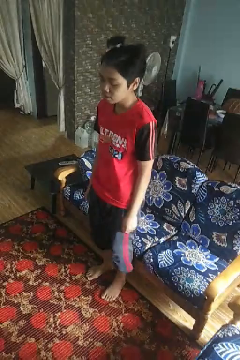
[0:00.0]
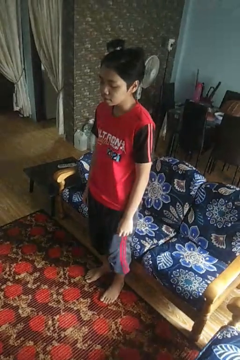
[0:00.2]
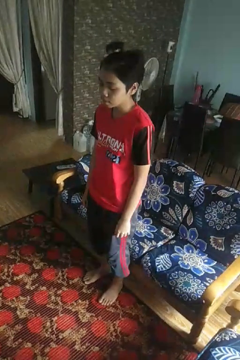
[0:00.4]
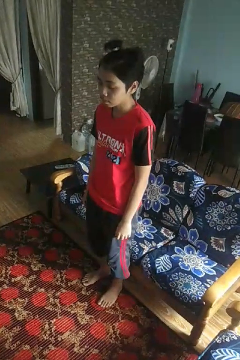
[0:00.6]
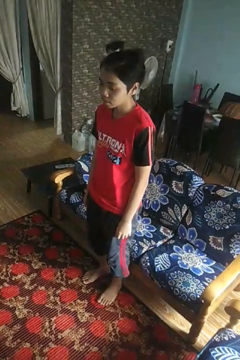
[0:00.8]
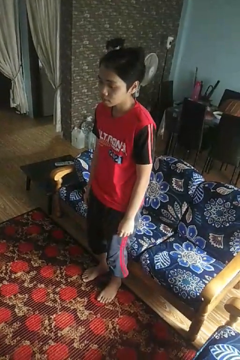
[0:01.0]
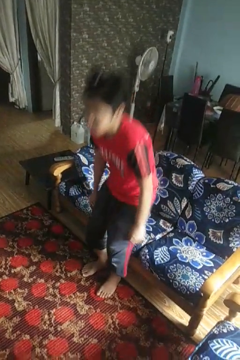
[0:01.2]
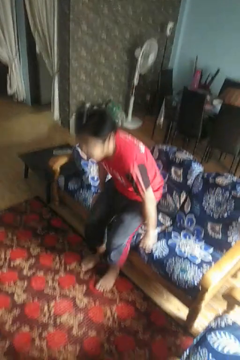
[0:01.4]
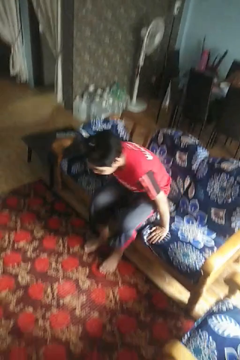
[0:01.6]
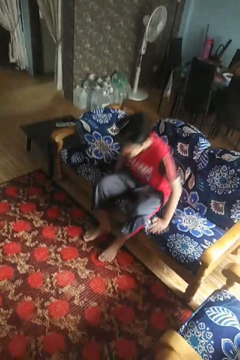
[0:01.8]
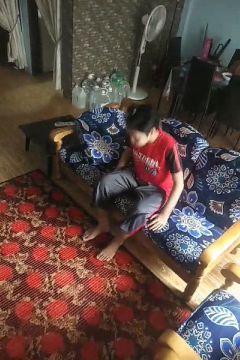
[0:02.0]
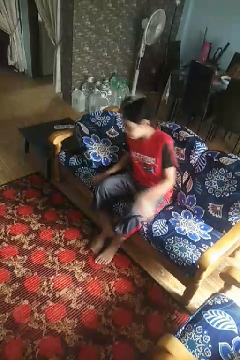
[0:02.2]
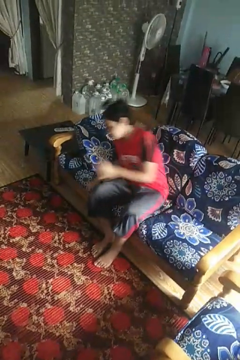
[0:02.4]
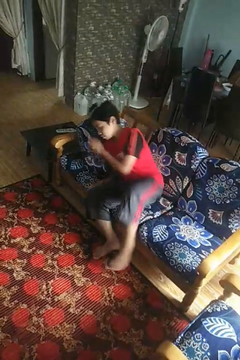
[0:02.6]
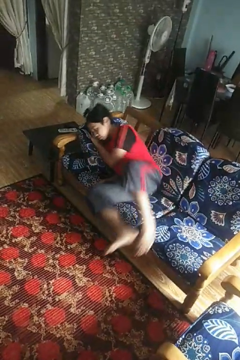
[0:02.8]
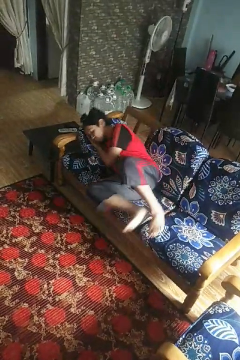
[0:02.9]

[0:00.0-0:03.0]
person lies down on couch

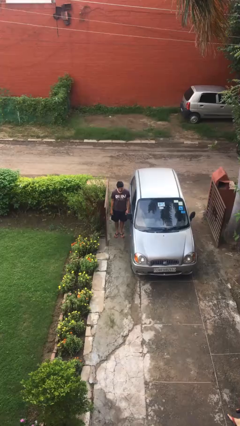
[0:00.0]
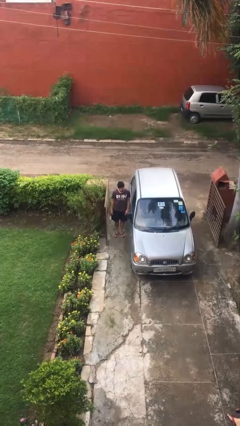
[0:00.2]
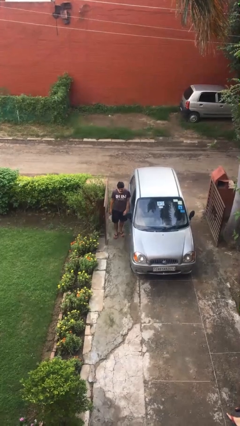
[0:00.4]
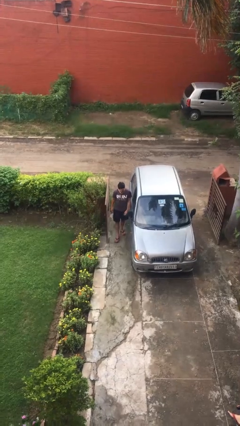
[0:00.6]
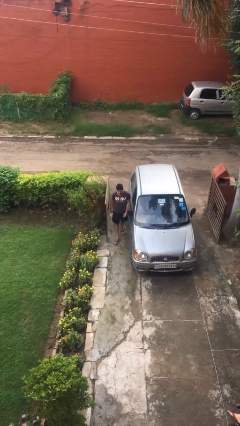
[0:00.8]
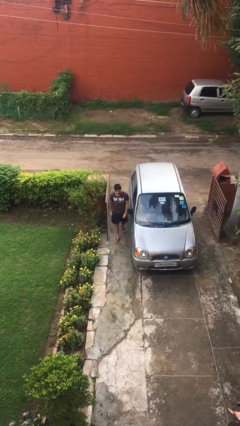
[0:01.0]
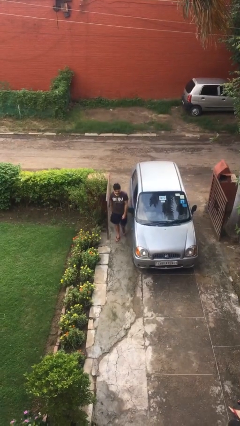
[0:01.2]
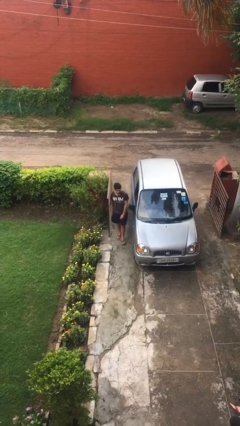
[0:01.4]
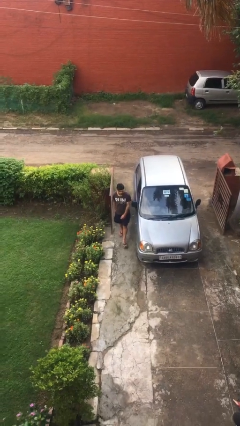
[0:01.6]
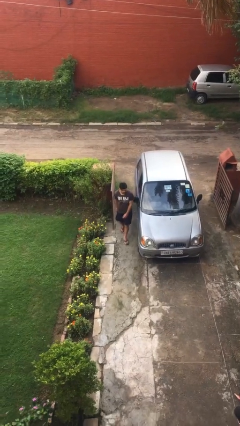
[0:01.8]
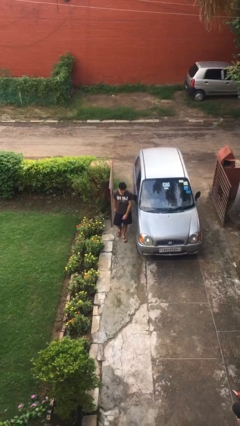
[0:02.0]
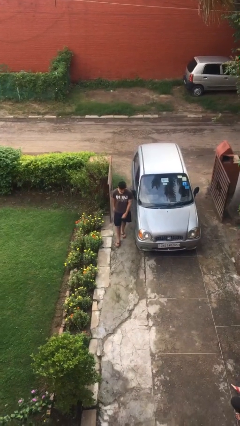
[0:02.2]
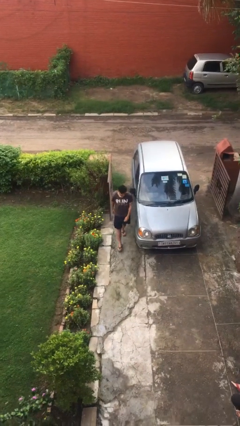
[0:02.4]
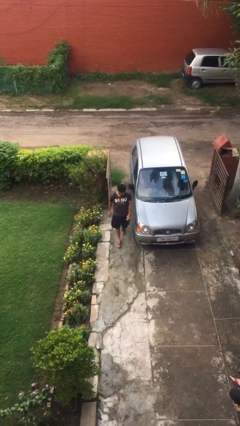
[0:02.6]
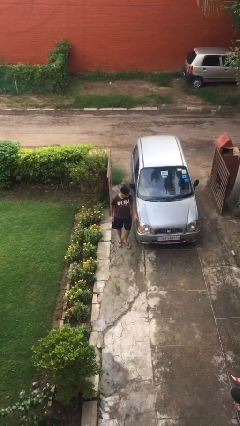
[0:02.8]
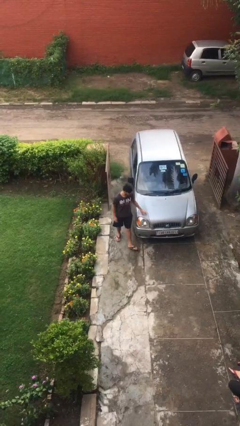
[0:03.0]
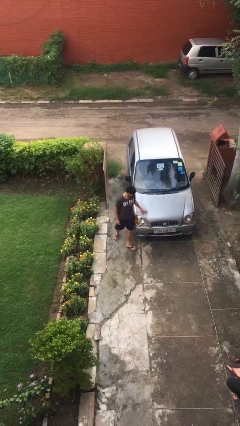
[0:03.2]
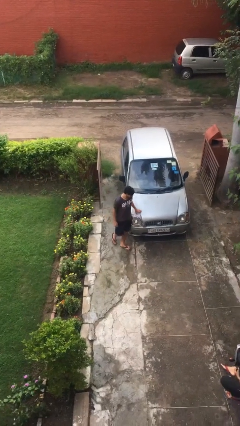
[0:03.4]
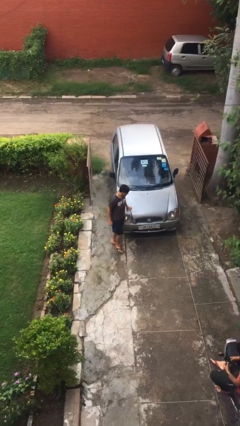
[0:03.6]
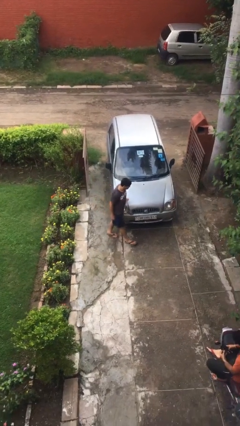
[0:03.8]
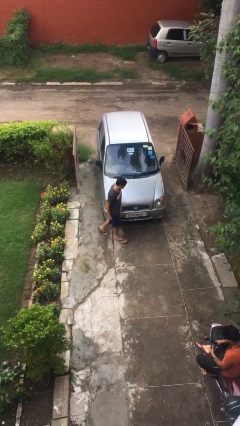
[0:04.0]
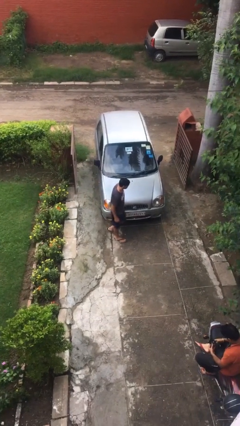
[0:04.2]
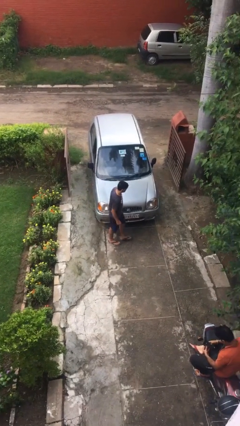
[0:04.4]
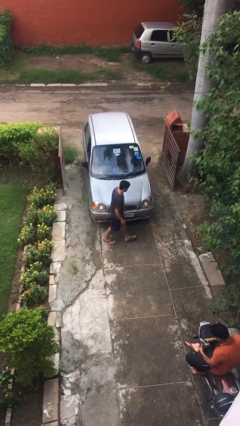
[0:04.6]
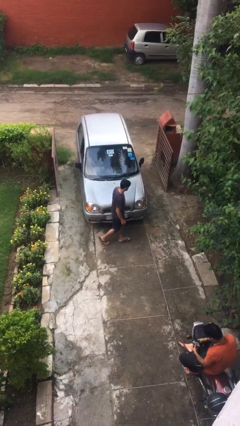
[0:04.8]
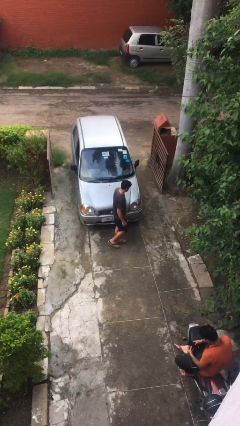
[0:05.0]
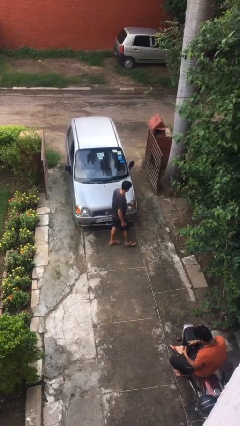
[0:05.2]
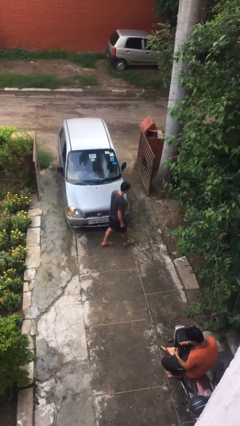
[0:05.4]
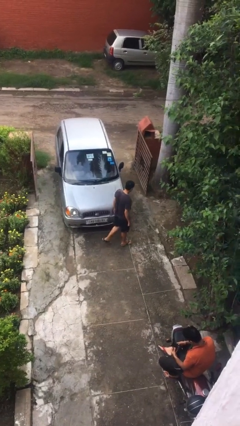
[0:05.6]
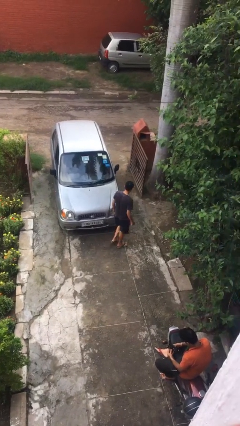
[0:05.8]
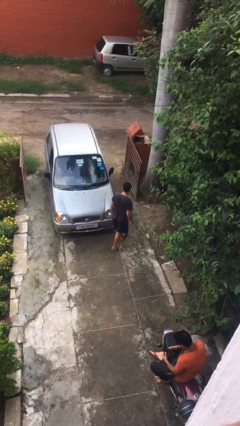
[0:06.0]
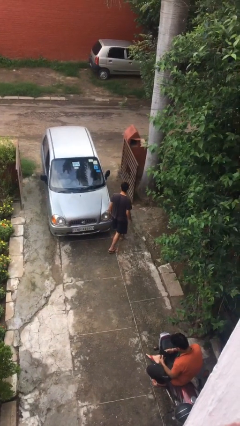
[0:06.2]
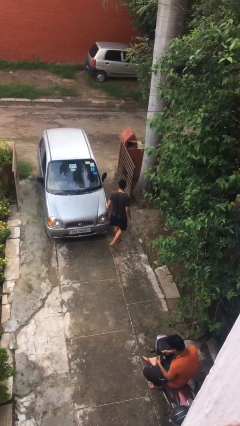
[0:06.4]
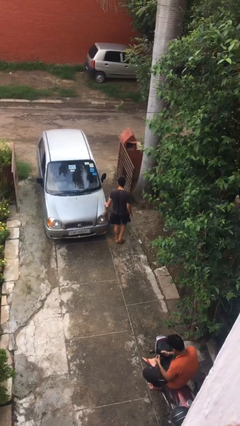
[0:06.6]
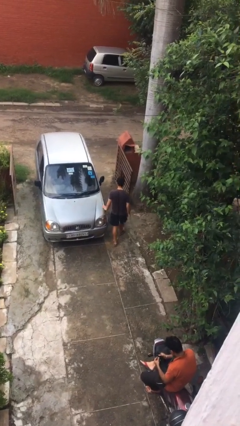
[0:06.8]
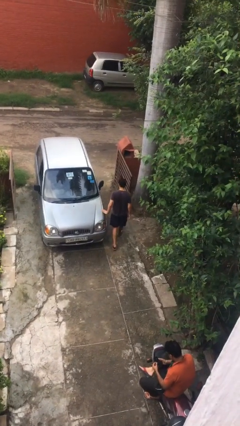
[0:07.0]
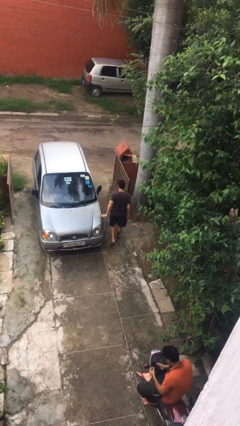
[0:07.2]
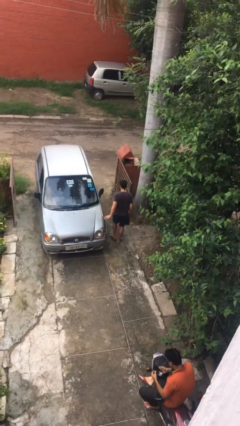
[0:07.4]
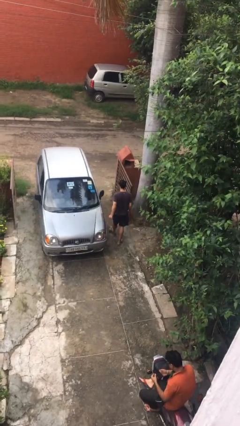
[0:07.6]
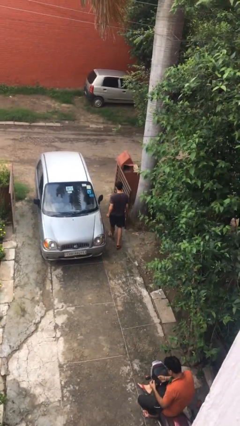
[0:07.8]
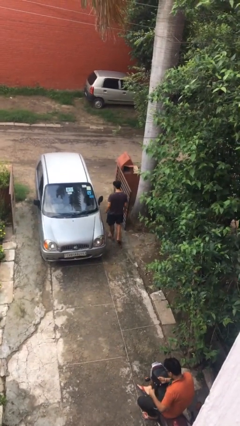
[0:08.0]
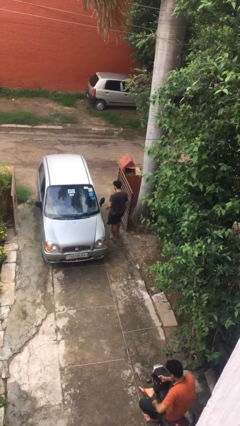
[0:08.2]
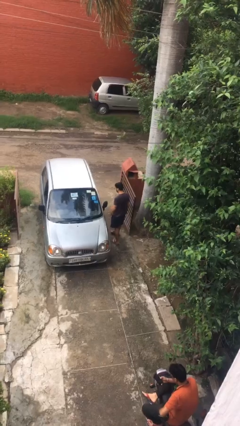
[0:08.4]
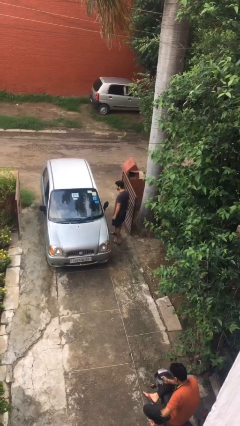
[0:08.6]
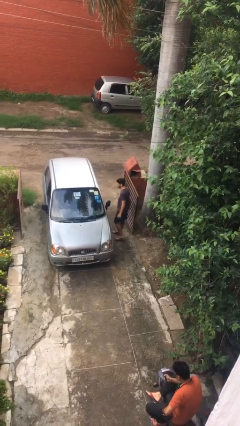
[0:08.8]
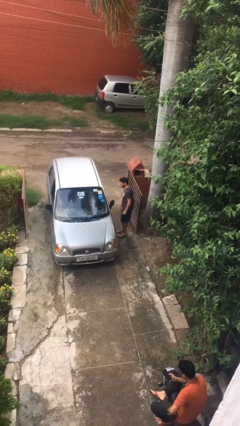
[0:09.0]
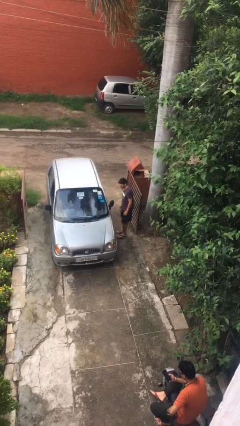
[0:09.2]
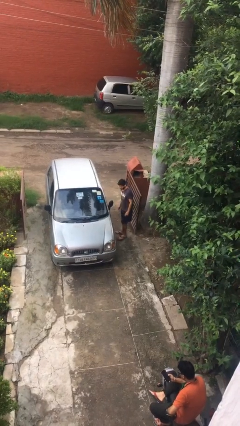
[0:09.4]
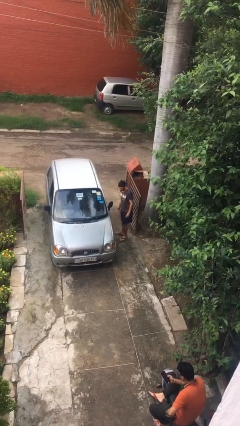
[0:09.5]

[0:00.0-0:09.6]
person walks around car

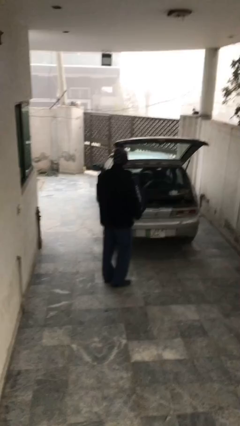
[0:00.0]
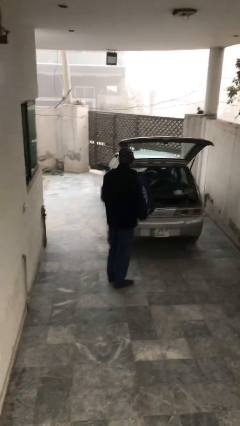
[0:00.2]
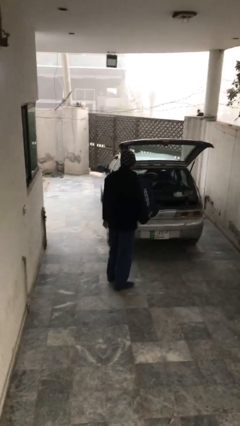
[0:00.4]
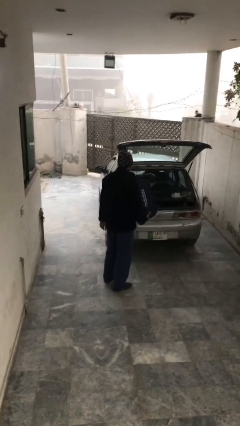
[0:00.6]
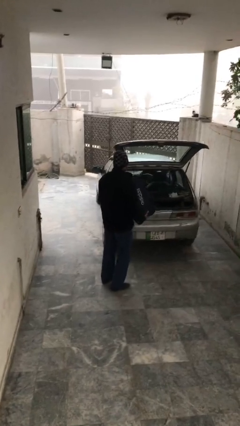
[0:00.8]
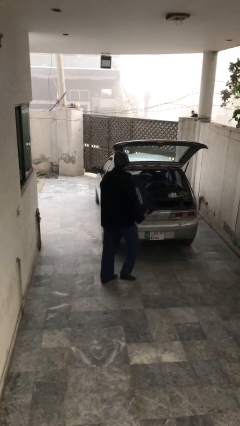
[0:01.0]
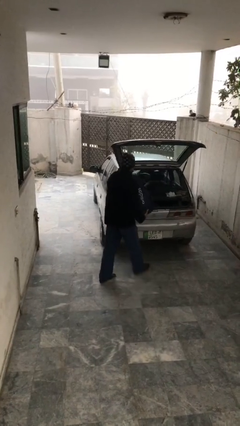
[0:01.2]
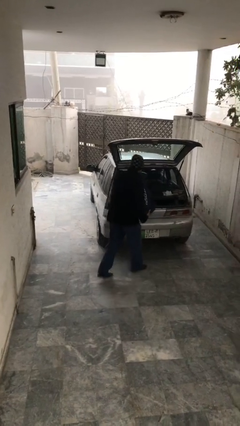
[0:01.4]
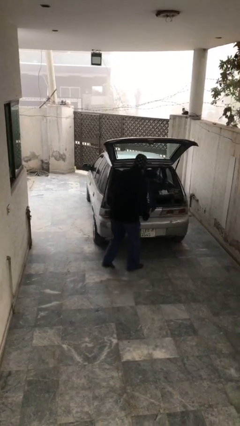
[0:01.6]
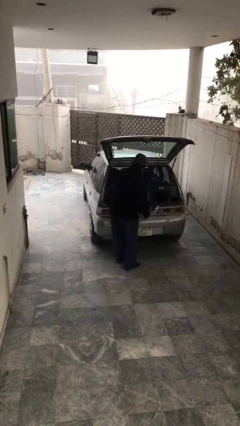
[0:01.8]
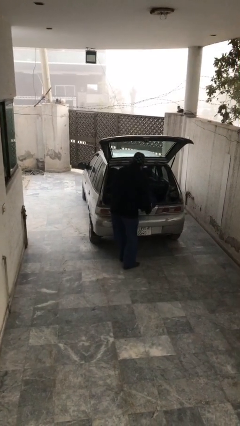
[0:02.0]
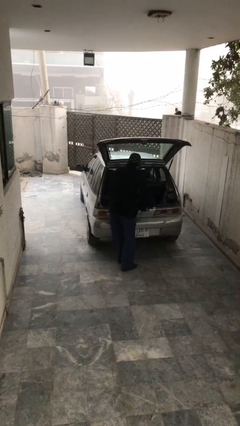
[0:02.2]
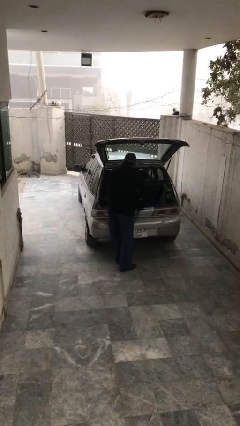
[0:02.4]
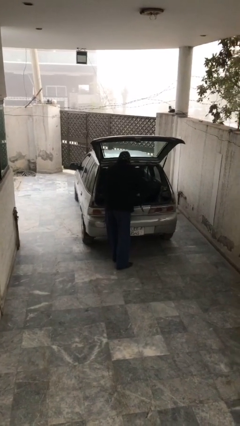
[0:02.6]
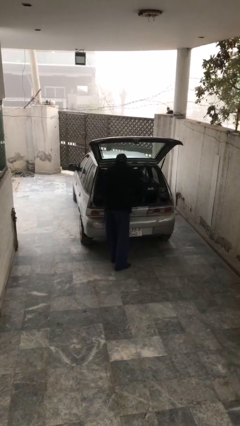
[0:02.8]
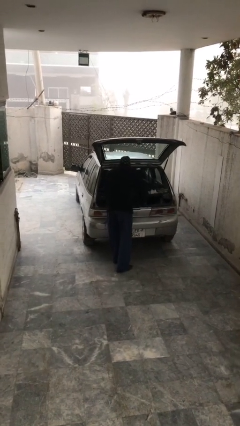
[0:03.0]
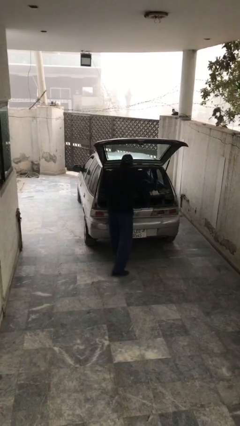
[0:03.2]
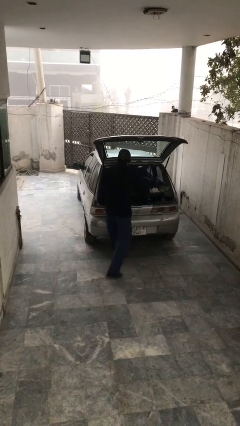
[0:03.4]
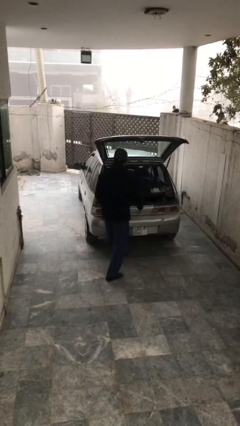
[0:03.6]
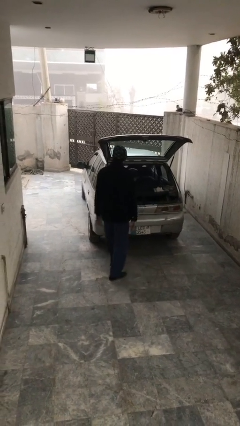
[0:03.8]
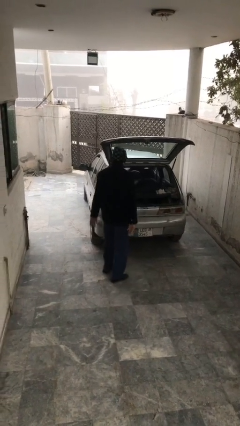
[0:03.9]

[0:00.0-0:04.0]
person loads car

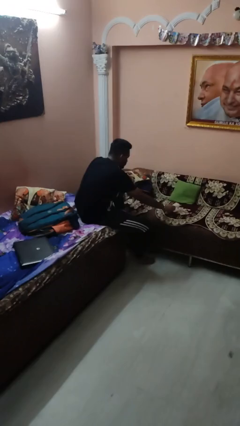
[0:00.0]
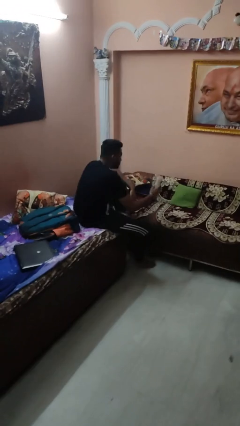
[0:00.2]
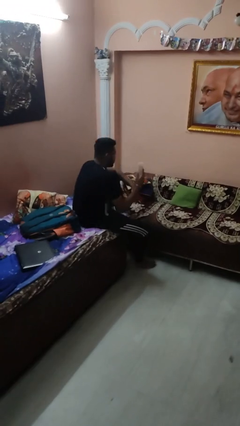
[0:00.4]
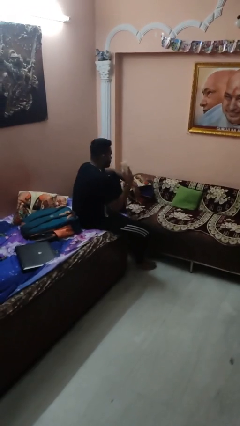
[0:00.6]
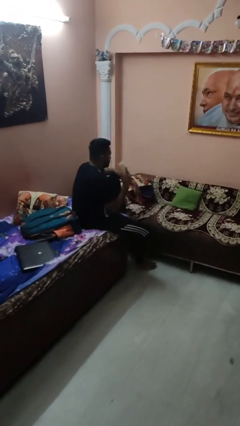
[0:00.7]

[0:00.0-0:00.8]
person picks up object from couch

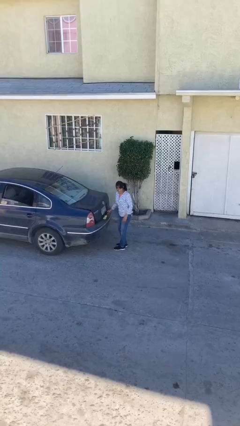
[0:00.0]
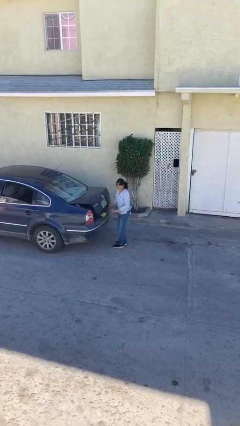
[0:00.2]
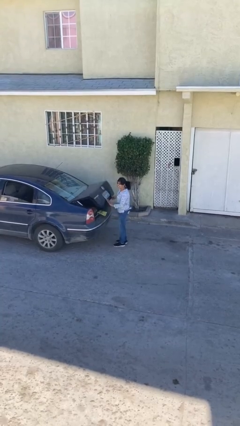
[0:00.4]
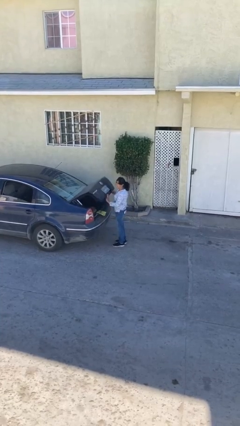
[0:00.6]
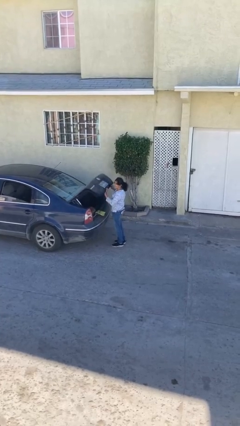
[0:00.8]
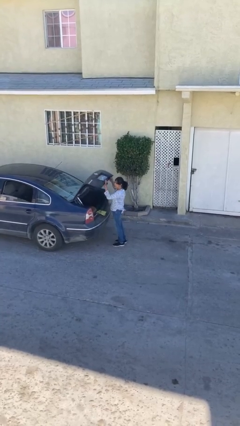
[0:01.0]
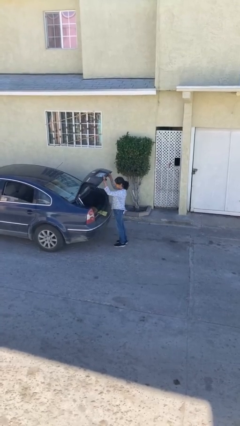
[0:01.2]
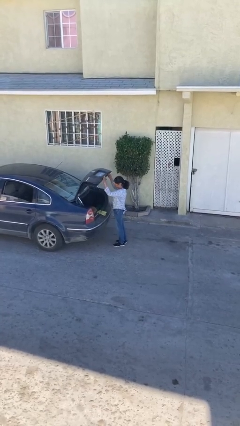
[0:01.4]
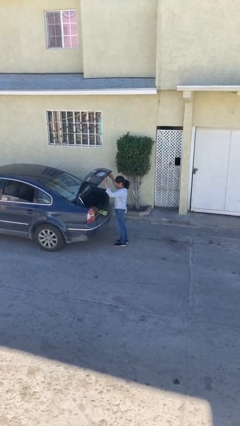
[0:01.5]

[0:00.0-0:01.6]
person opens car trunk
